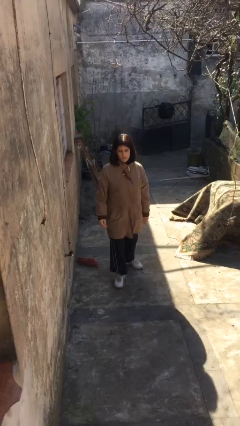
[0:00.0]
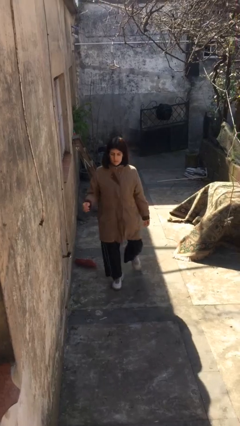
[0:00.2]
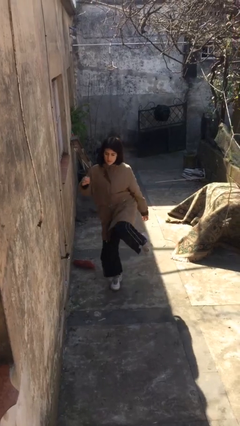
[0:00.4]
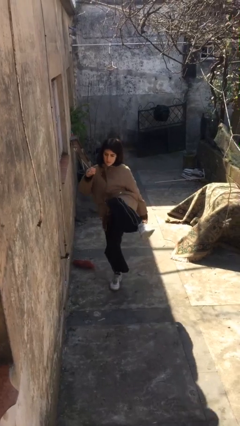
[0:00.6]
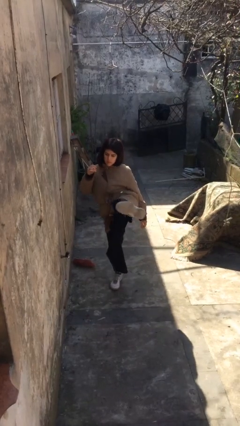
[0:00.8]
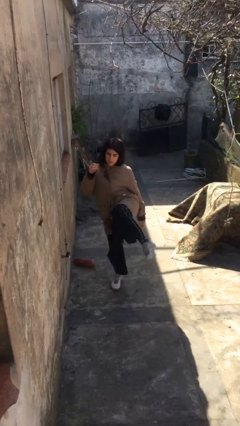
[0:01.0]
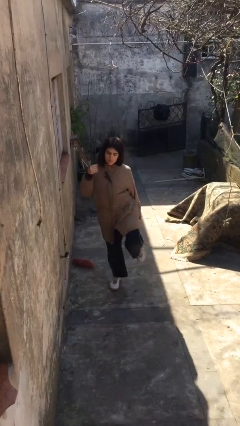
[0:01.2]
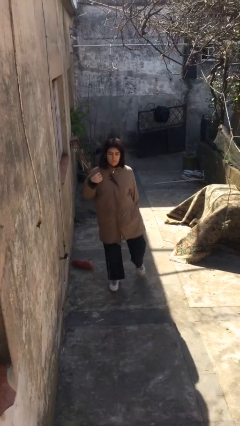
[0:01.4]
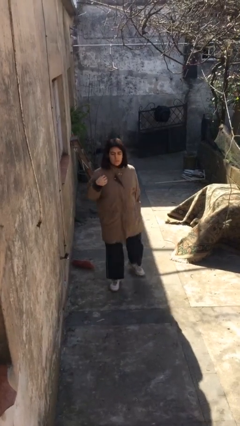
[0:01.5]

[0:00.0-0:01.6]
person karate kicks

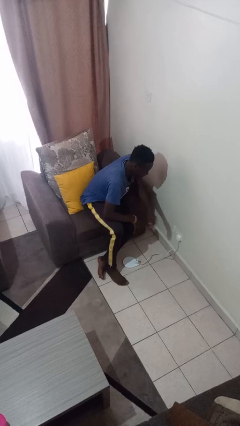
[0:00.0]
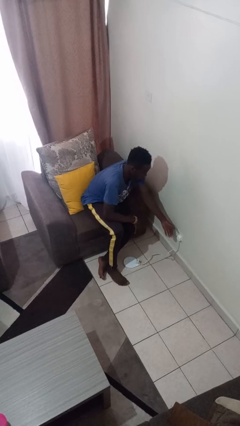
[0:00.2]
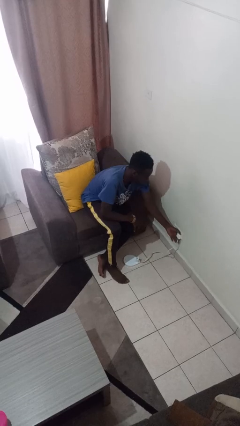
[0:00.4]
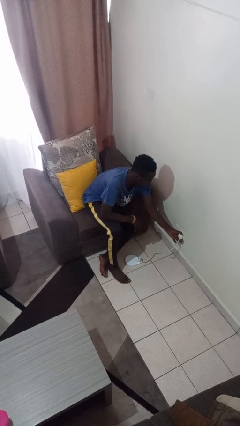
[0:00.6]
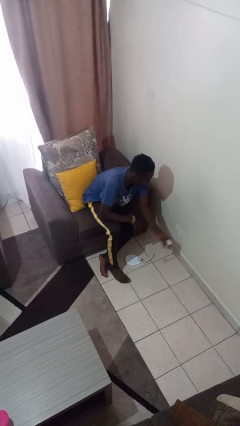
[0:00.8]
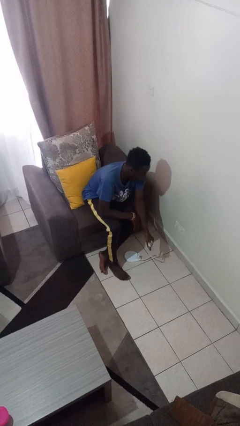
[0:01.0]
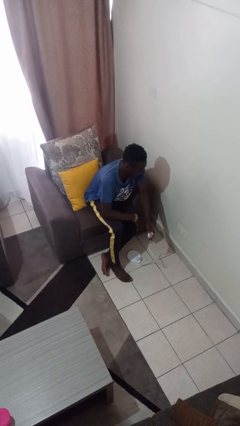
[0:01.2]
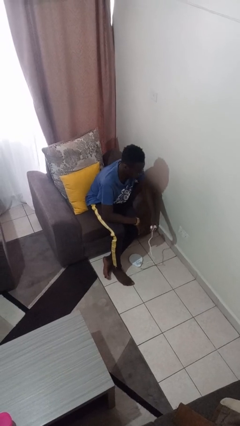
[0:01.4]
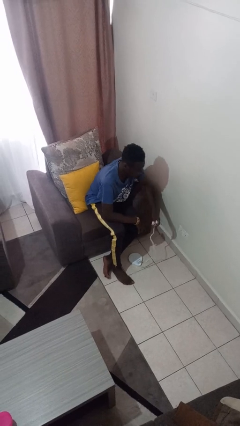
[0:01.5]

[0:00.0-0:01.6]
person unplugs from electrical socket

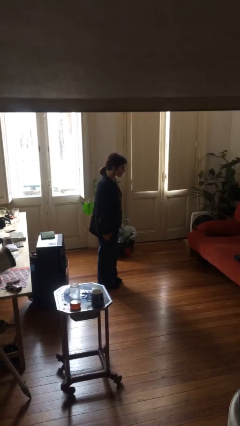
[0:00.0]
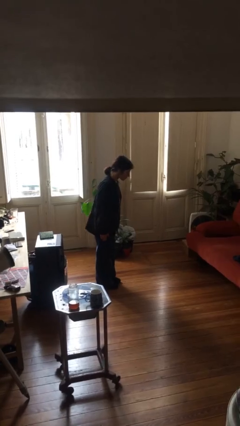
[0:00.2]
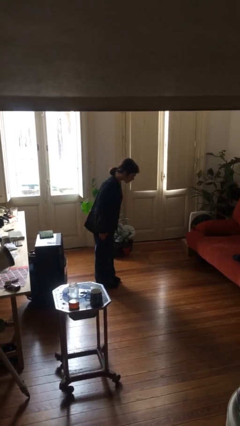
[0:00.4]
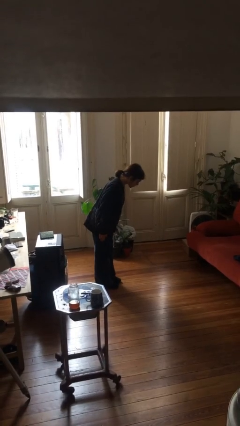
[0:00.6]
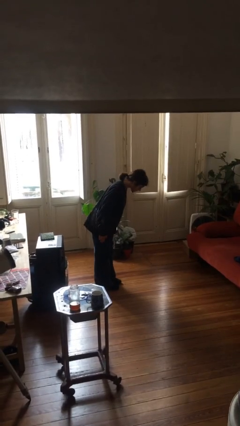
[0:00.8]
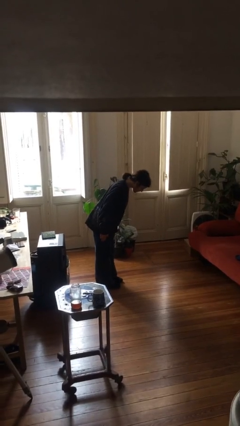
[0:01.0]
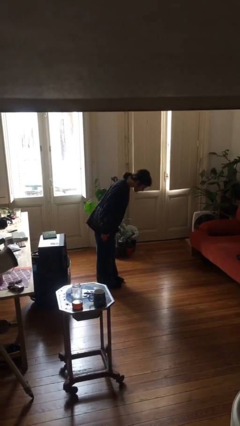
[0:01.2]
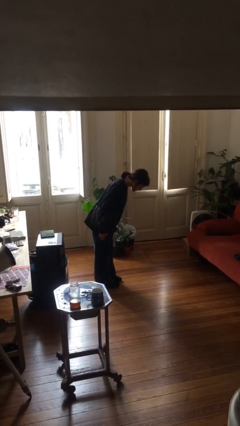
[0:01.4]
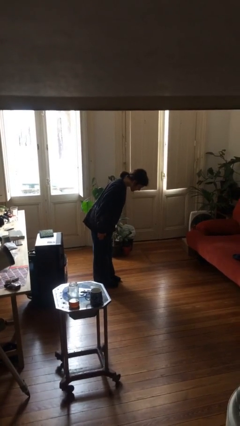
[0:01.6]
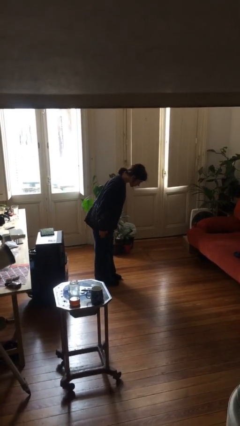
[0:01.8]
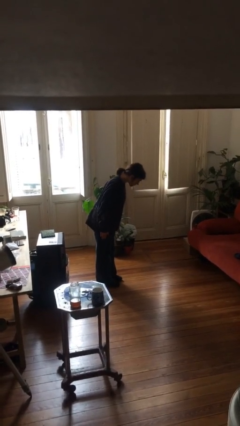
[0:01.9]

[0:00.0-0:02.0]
person bows

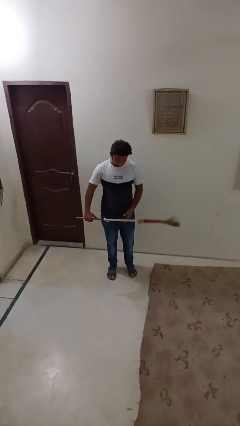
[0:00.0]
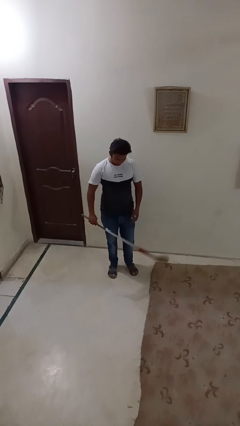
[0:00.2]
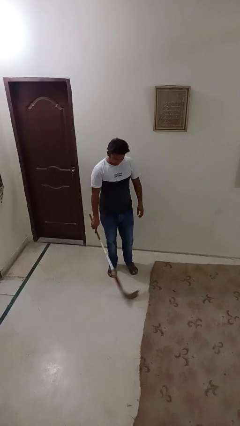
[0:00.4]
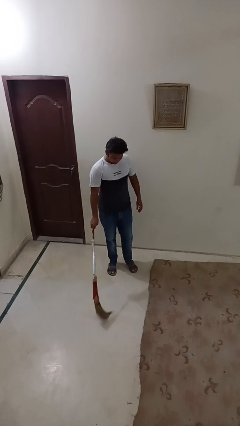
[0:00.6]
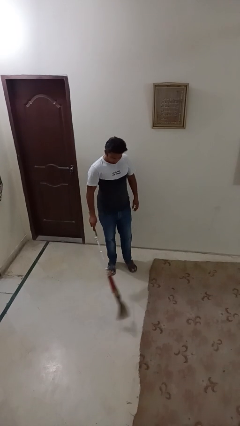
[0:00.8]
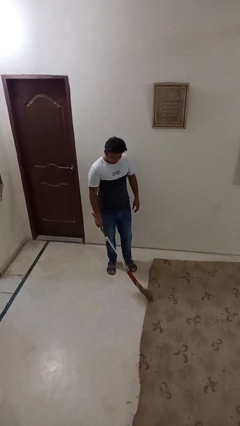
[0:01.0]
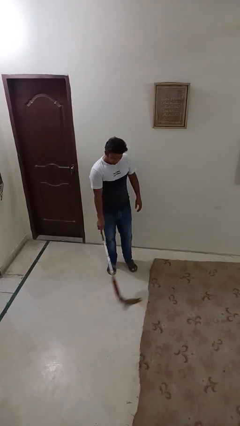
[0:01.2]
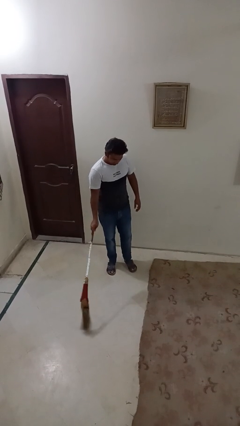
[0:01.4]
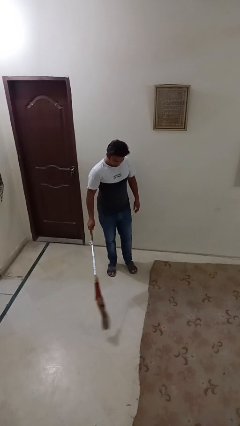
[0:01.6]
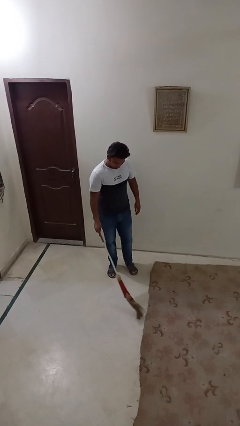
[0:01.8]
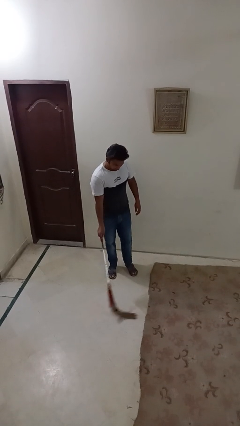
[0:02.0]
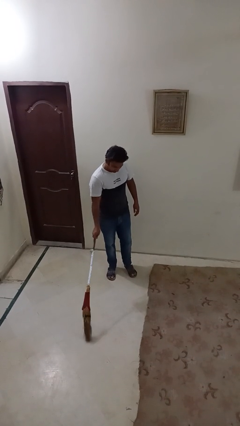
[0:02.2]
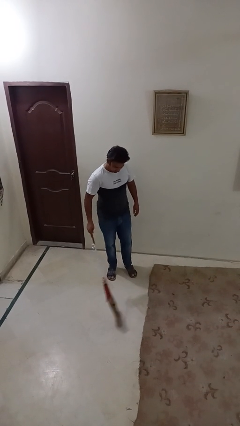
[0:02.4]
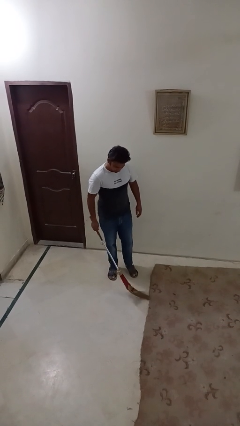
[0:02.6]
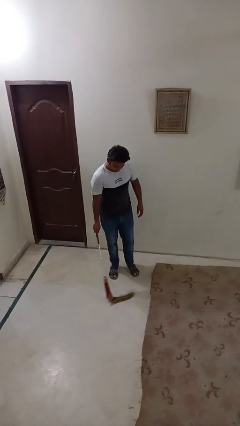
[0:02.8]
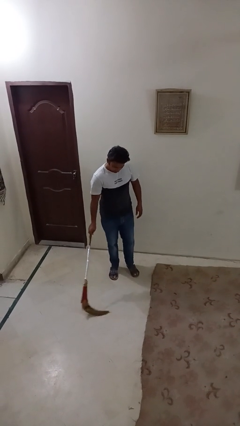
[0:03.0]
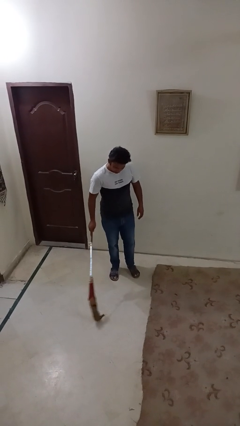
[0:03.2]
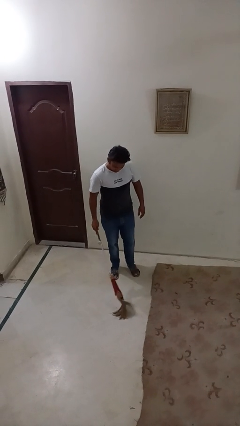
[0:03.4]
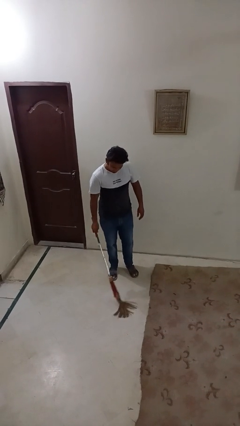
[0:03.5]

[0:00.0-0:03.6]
person sweeps floor

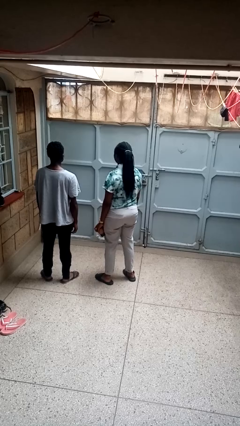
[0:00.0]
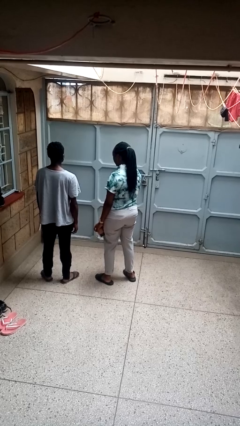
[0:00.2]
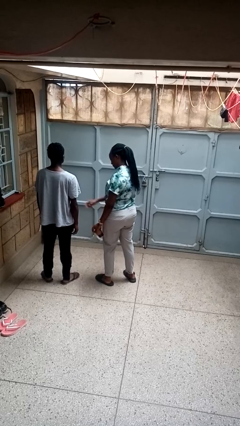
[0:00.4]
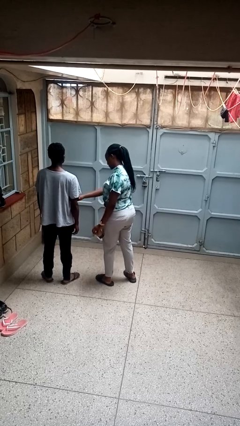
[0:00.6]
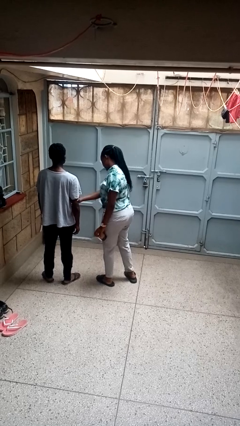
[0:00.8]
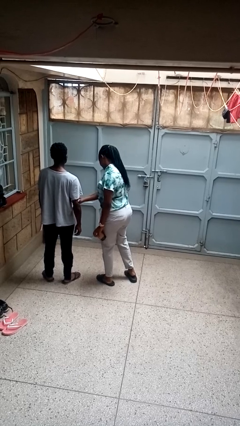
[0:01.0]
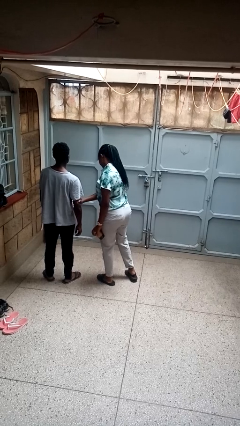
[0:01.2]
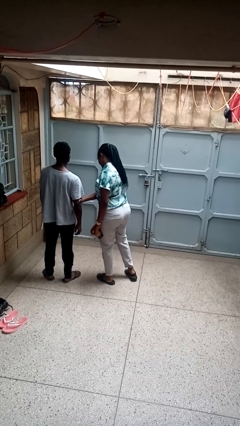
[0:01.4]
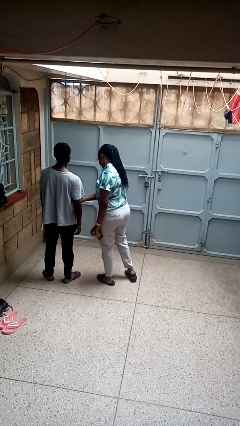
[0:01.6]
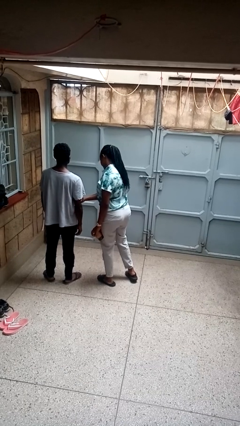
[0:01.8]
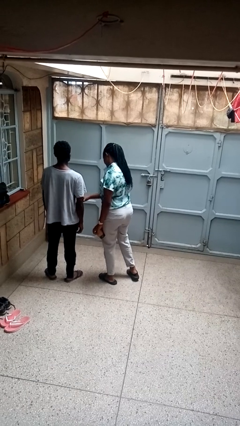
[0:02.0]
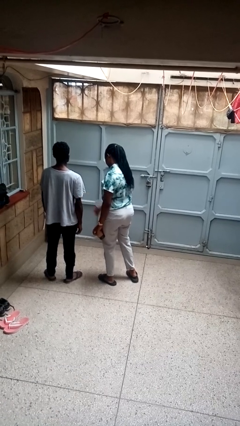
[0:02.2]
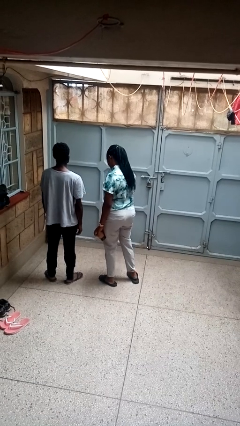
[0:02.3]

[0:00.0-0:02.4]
person grabs person by bicep

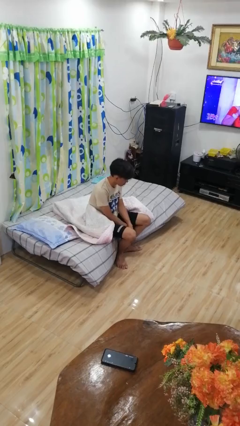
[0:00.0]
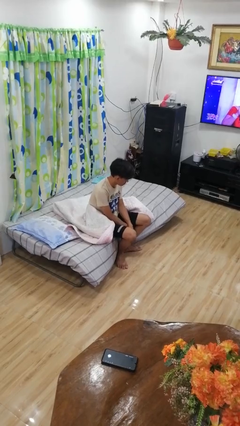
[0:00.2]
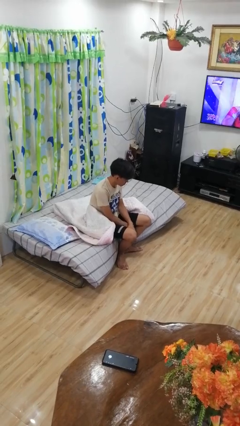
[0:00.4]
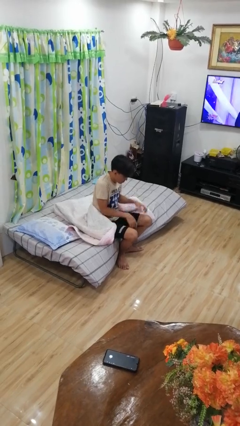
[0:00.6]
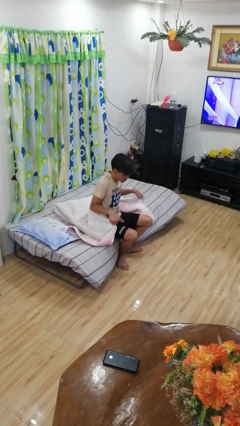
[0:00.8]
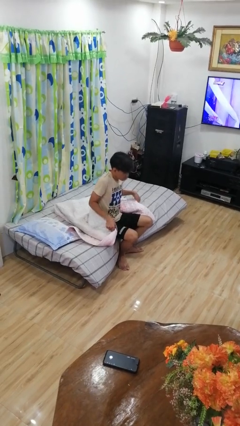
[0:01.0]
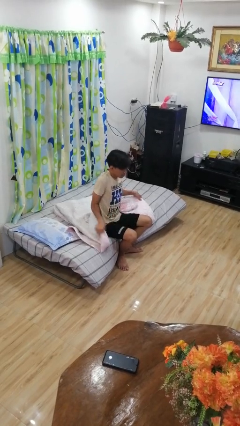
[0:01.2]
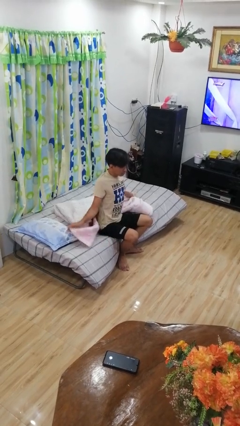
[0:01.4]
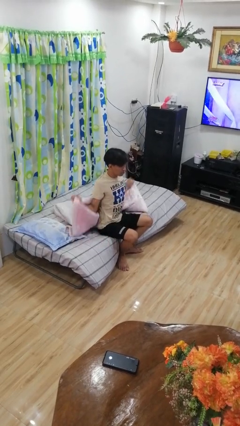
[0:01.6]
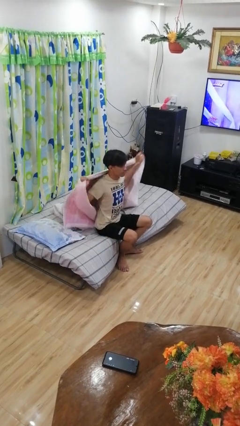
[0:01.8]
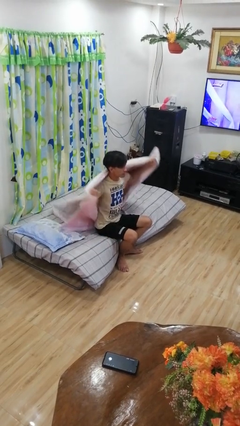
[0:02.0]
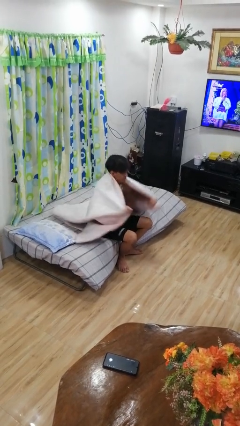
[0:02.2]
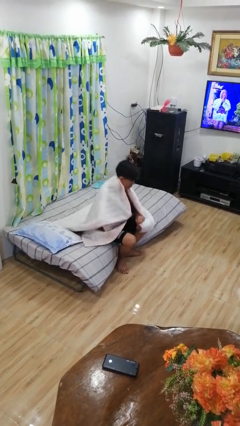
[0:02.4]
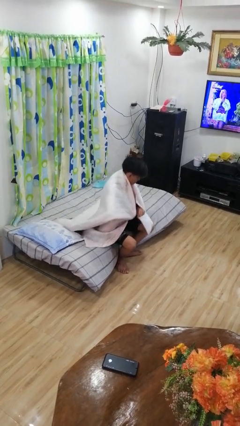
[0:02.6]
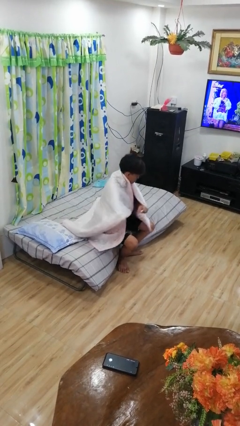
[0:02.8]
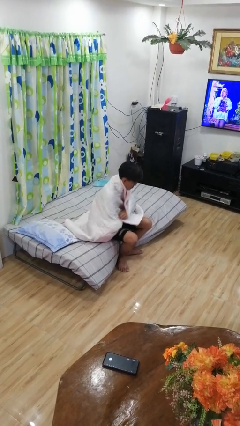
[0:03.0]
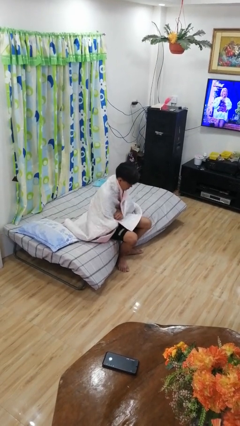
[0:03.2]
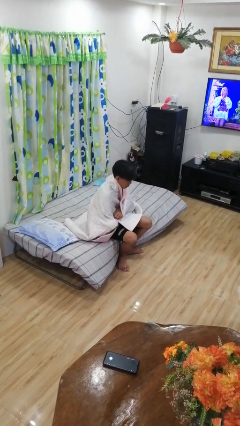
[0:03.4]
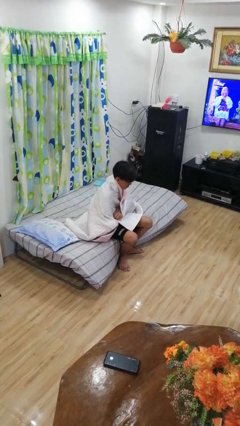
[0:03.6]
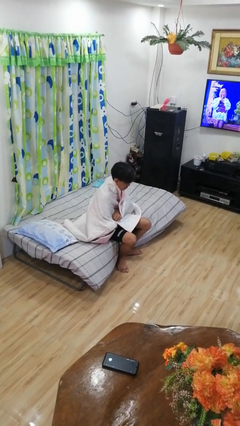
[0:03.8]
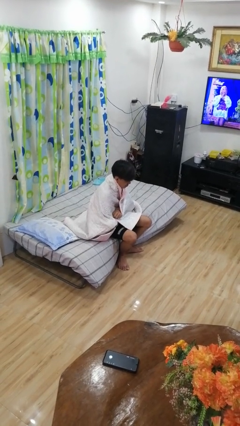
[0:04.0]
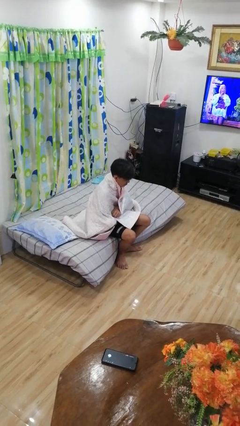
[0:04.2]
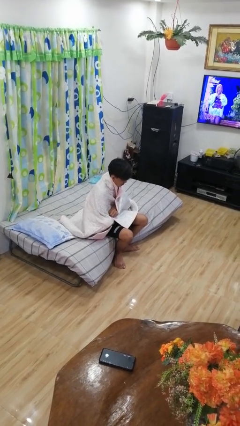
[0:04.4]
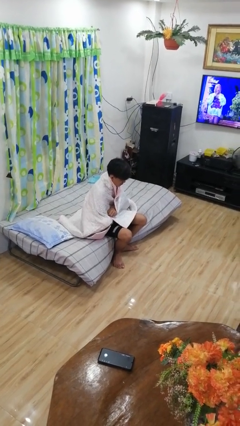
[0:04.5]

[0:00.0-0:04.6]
person covers with bedsheets

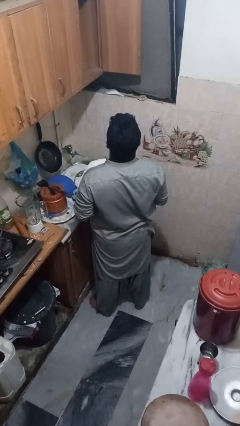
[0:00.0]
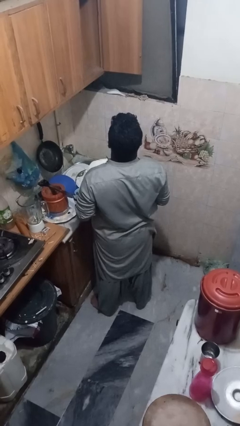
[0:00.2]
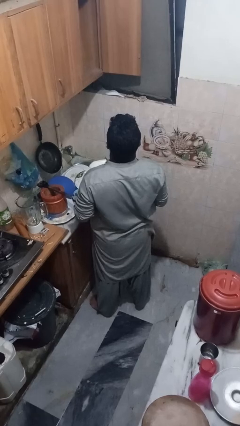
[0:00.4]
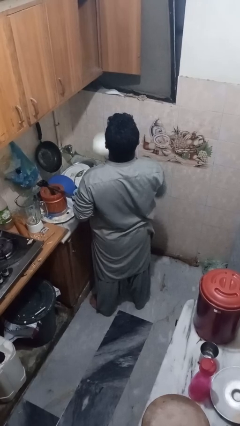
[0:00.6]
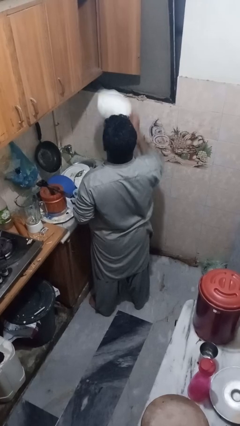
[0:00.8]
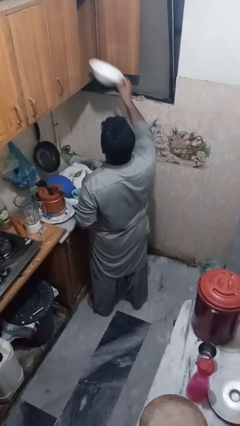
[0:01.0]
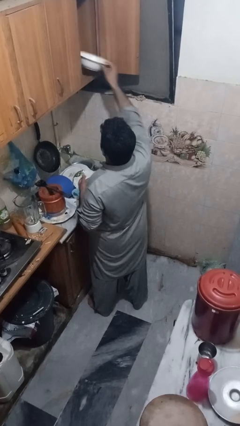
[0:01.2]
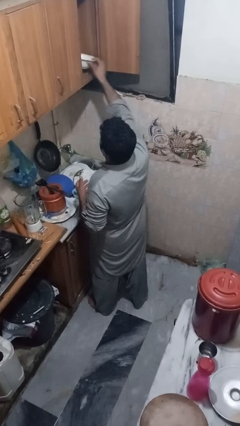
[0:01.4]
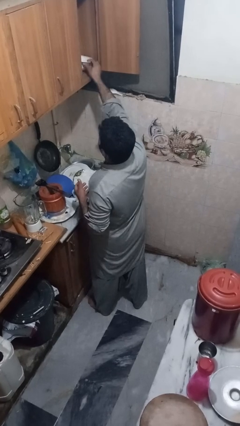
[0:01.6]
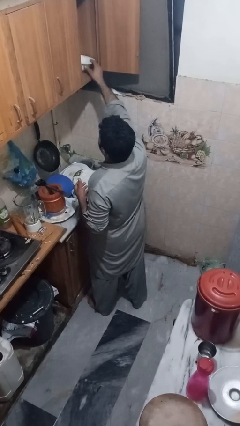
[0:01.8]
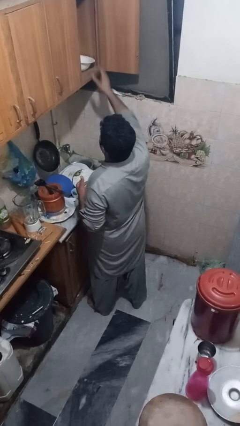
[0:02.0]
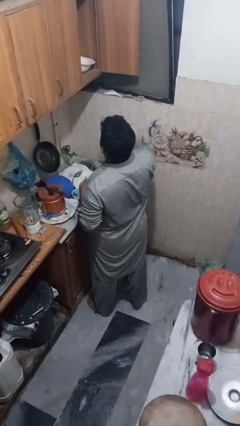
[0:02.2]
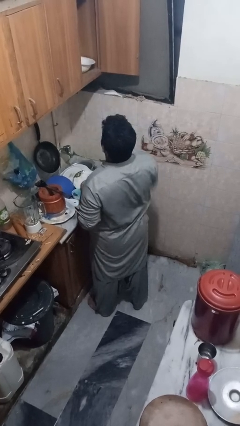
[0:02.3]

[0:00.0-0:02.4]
person puts object in cabinet
